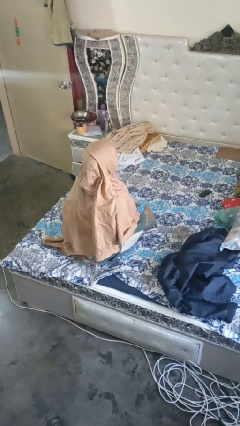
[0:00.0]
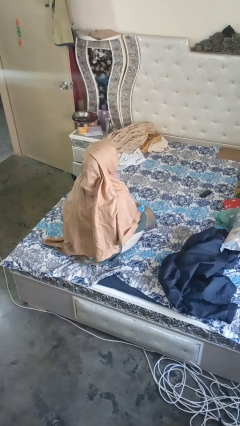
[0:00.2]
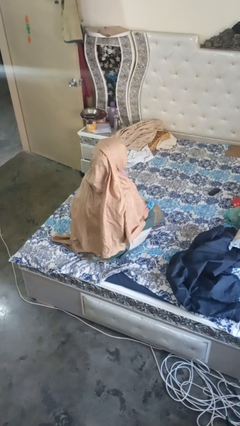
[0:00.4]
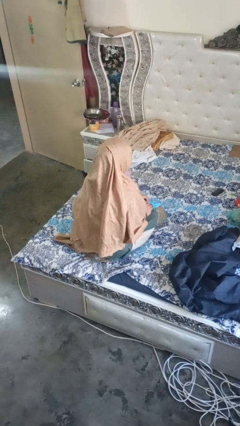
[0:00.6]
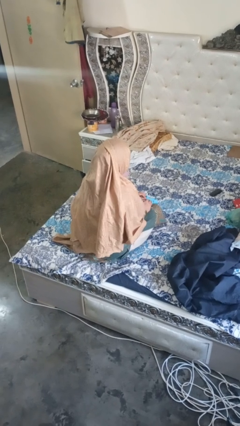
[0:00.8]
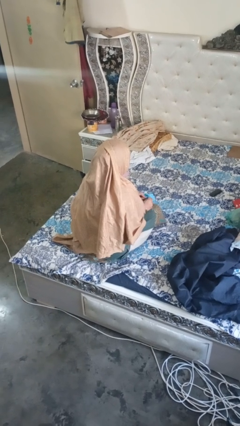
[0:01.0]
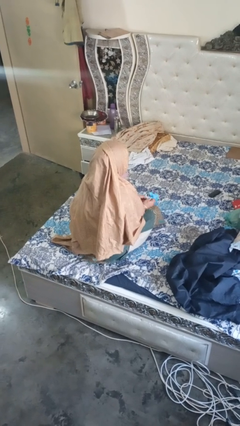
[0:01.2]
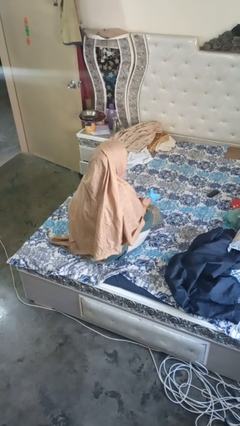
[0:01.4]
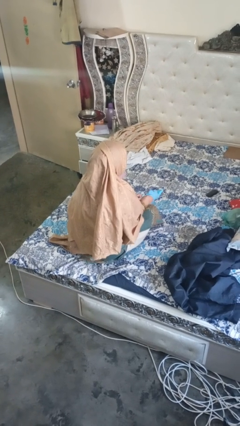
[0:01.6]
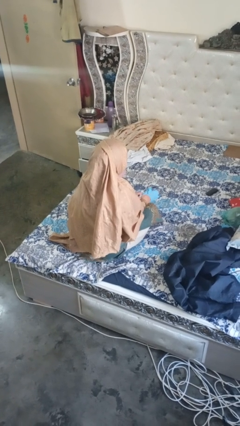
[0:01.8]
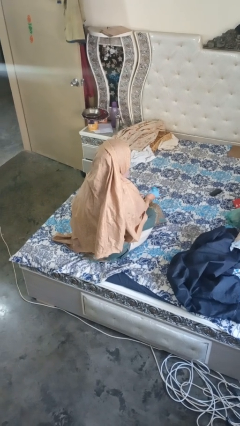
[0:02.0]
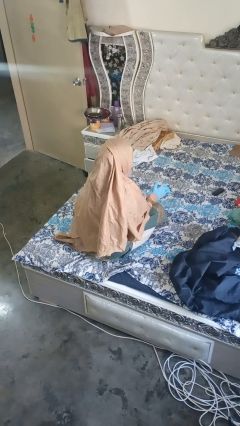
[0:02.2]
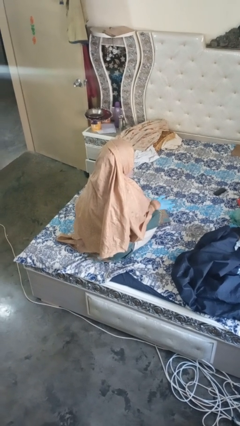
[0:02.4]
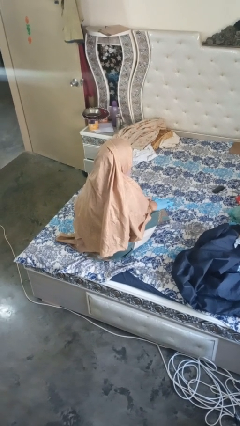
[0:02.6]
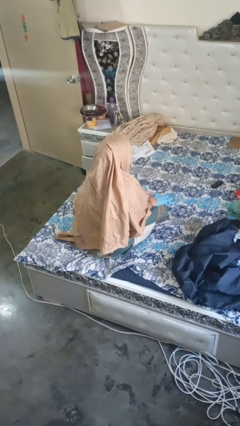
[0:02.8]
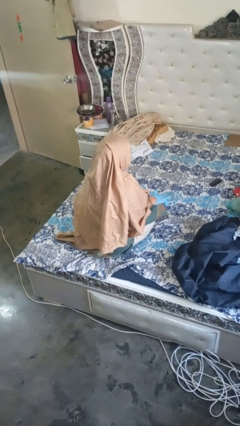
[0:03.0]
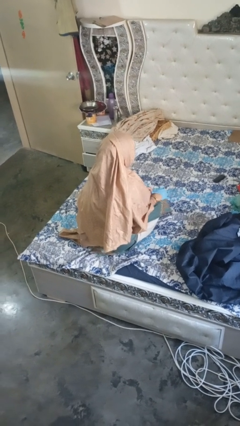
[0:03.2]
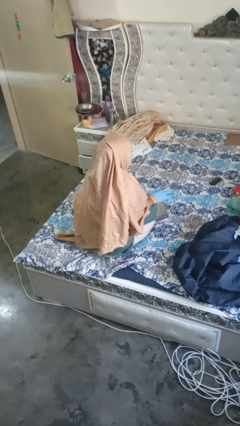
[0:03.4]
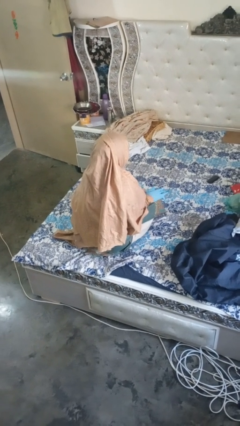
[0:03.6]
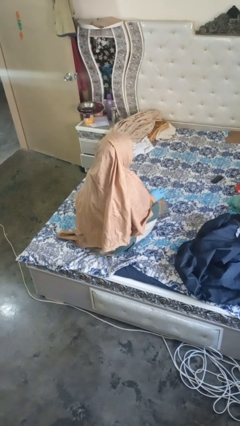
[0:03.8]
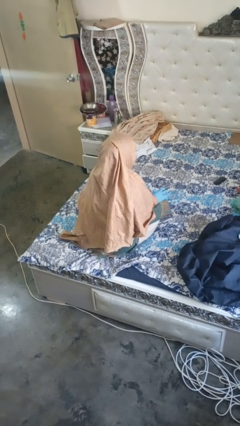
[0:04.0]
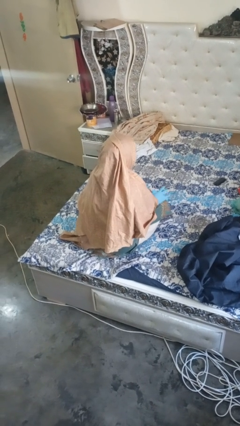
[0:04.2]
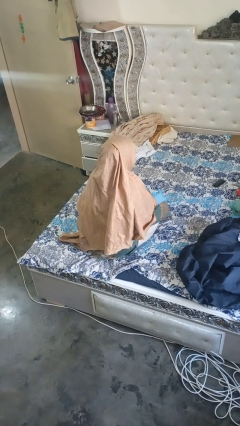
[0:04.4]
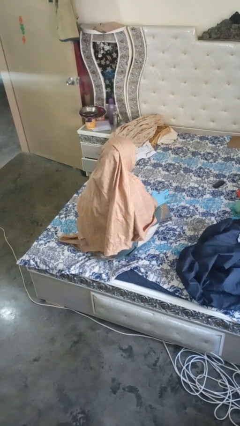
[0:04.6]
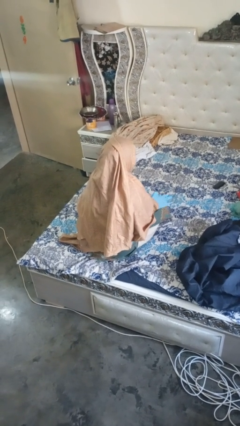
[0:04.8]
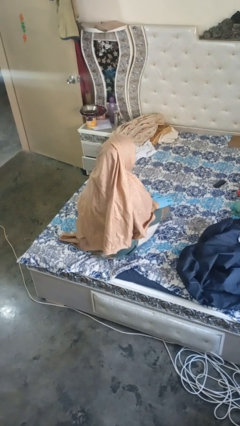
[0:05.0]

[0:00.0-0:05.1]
person puts on gloves

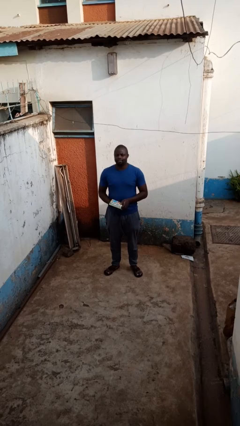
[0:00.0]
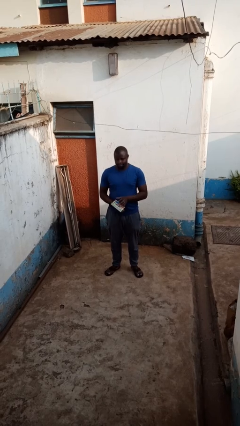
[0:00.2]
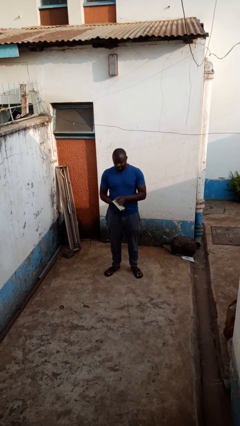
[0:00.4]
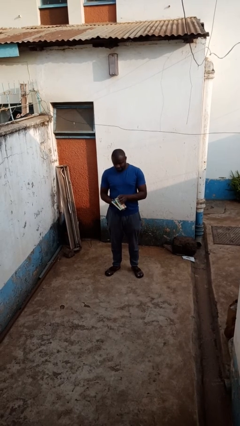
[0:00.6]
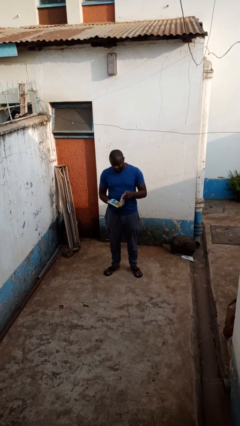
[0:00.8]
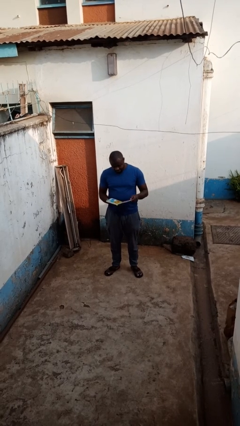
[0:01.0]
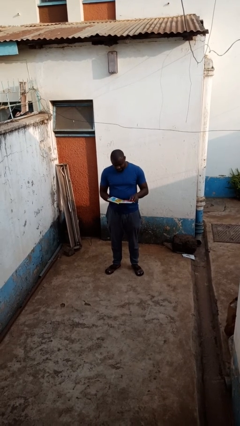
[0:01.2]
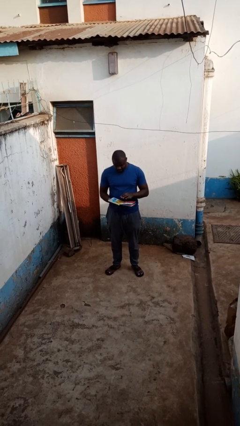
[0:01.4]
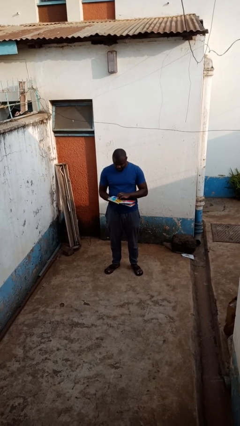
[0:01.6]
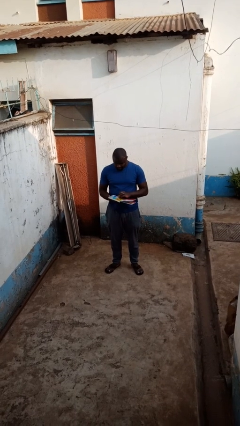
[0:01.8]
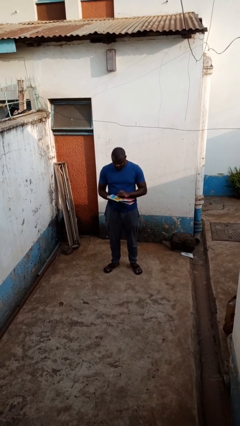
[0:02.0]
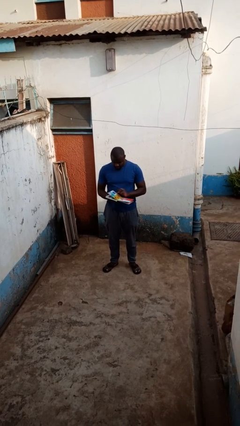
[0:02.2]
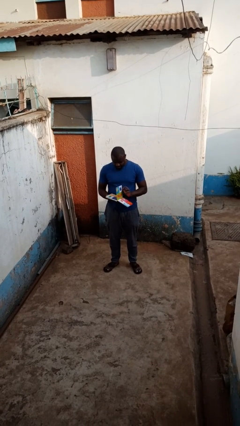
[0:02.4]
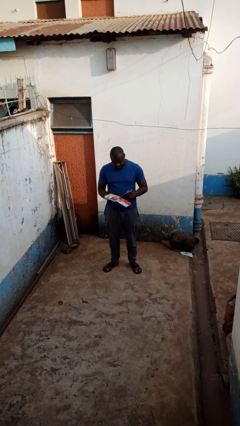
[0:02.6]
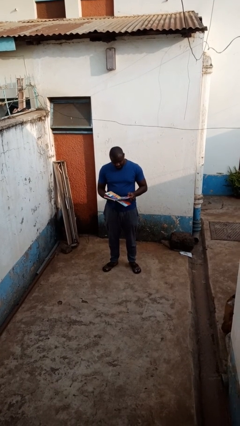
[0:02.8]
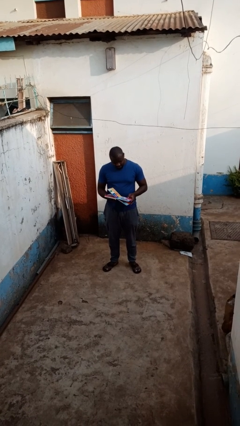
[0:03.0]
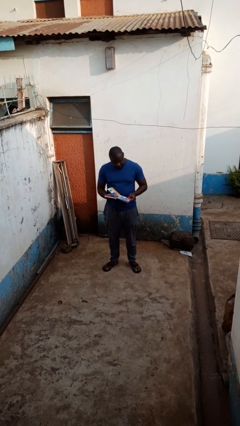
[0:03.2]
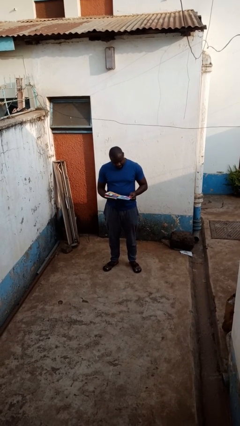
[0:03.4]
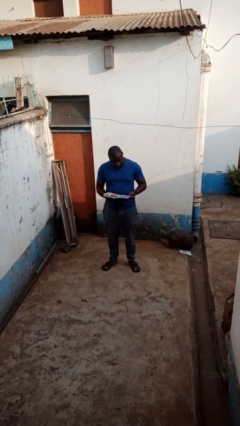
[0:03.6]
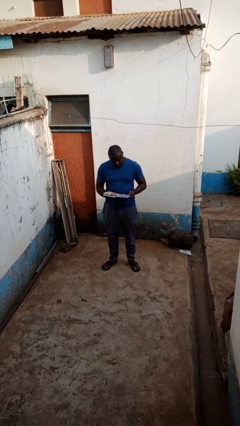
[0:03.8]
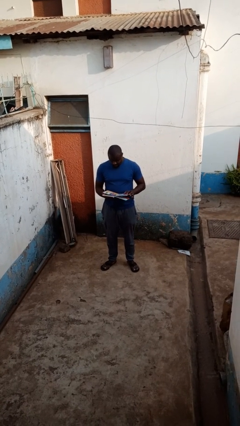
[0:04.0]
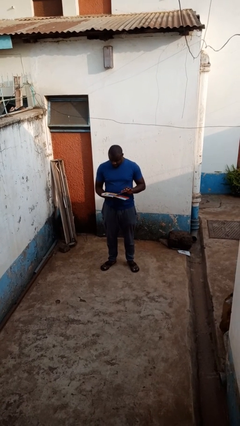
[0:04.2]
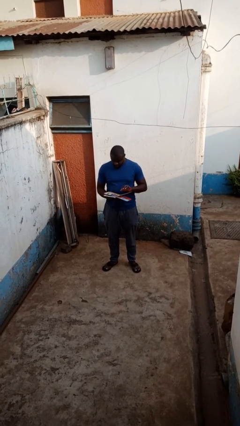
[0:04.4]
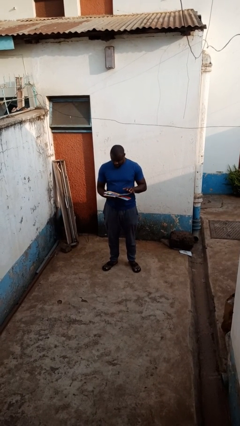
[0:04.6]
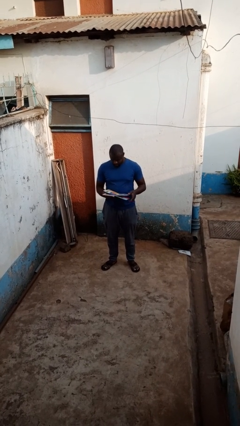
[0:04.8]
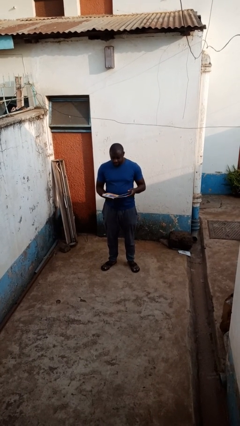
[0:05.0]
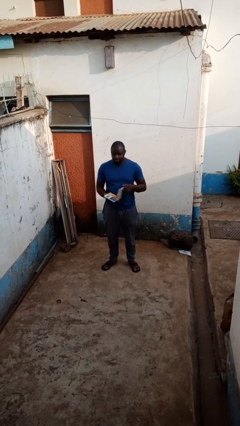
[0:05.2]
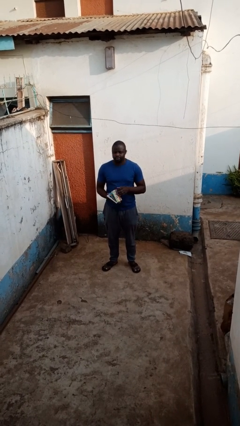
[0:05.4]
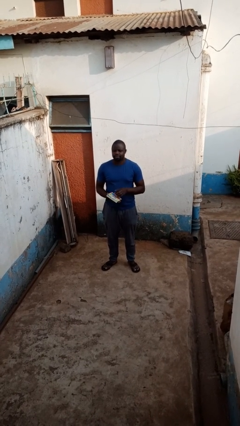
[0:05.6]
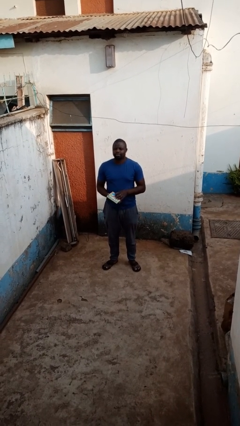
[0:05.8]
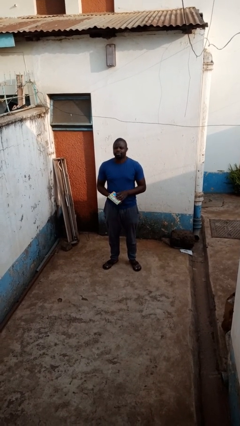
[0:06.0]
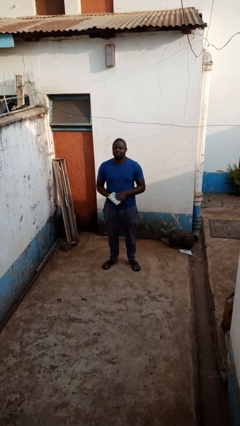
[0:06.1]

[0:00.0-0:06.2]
person reads book

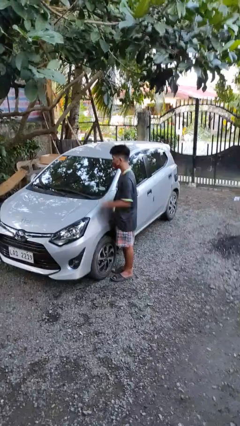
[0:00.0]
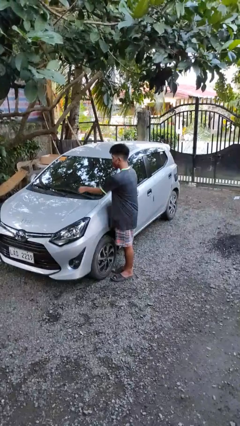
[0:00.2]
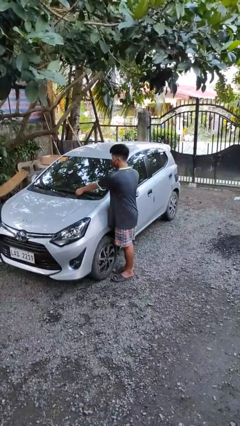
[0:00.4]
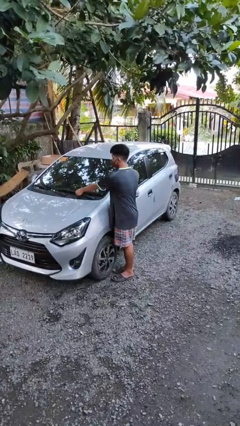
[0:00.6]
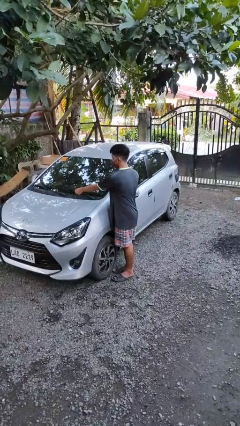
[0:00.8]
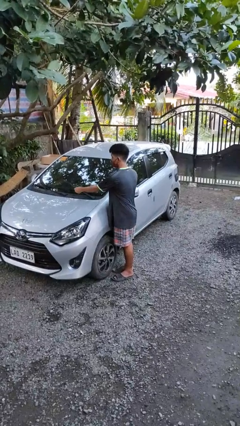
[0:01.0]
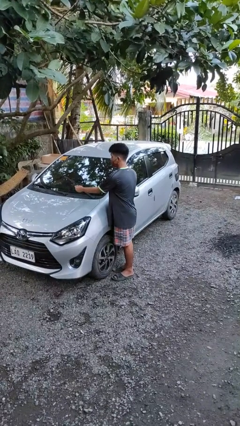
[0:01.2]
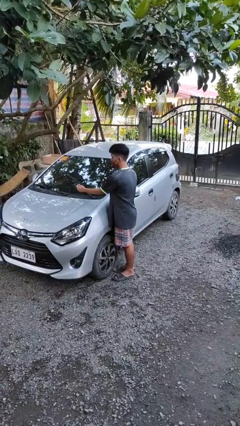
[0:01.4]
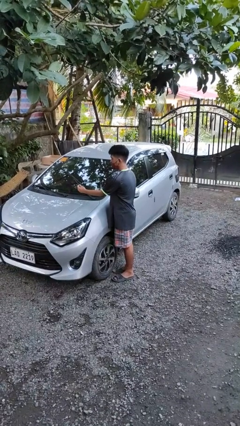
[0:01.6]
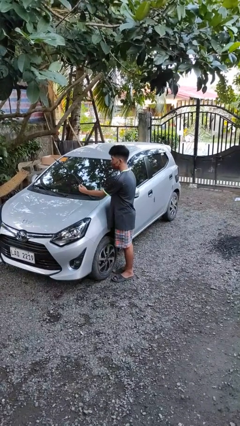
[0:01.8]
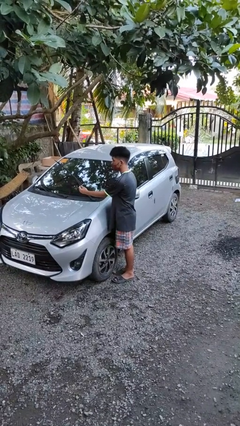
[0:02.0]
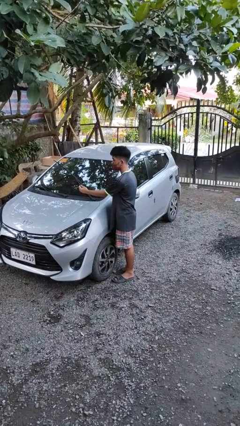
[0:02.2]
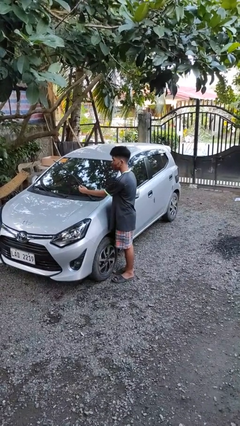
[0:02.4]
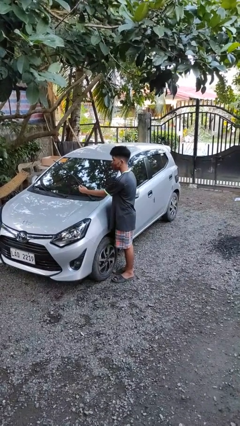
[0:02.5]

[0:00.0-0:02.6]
person flips up car wipers

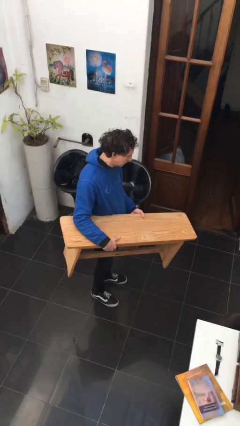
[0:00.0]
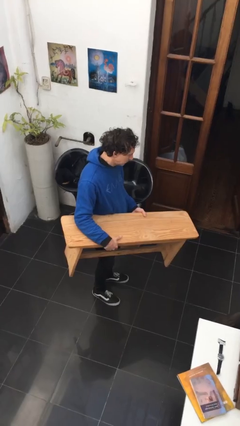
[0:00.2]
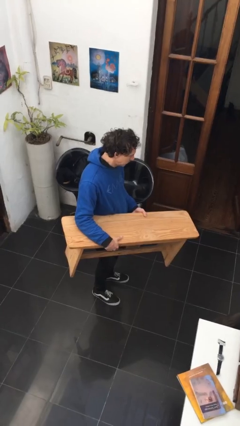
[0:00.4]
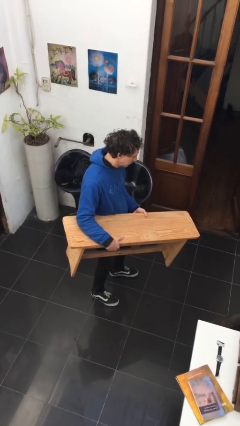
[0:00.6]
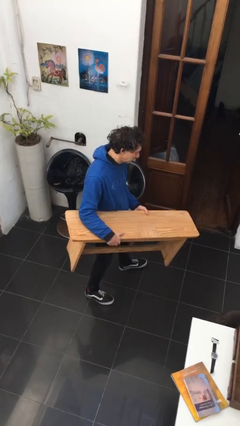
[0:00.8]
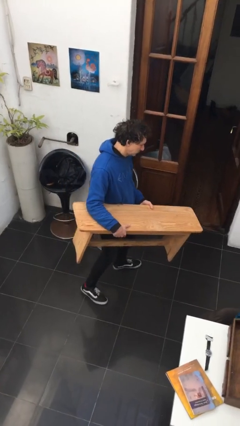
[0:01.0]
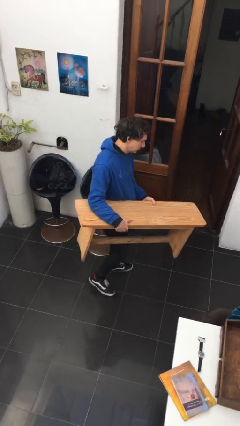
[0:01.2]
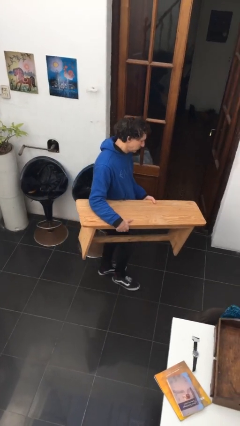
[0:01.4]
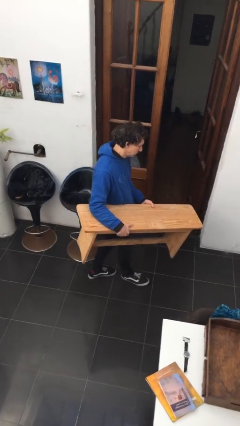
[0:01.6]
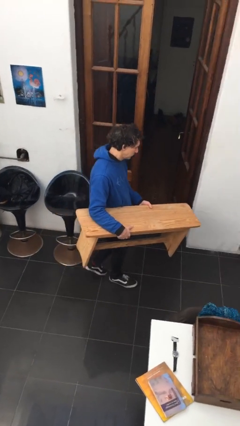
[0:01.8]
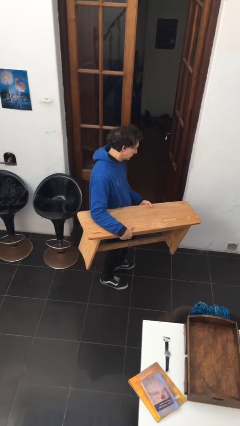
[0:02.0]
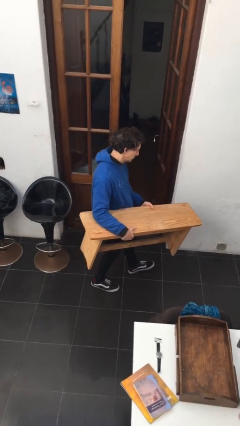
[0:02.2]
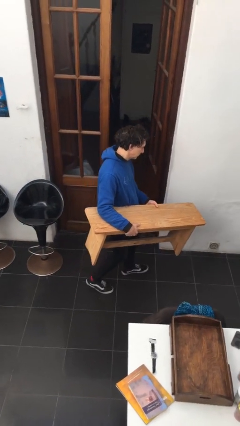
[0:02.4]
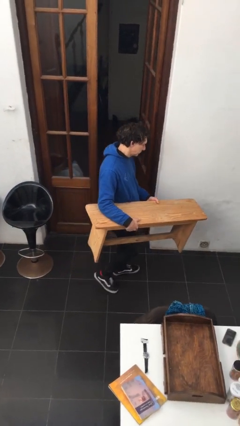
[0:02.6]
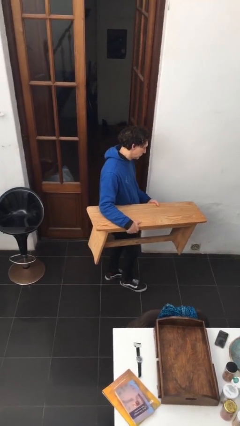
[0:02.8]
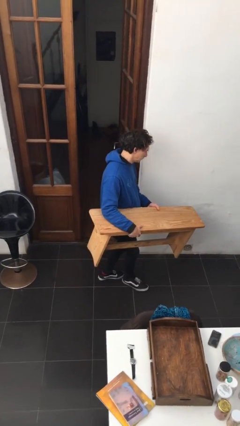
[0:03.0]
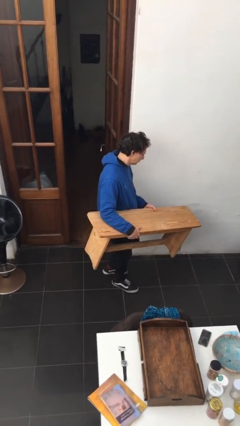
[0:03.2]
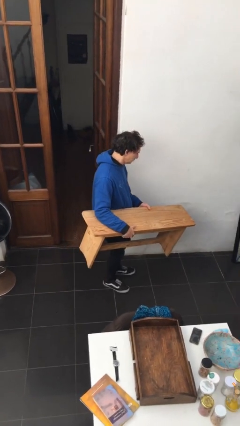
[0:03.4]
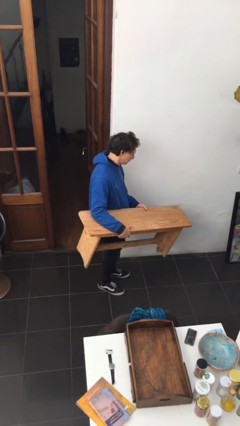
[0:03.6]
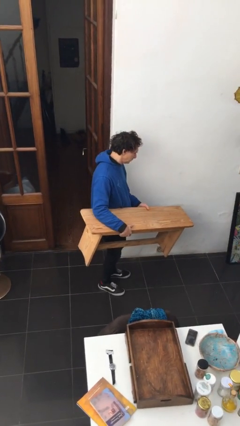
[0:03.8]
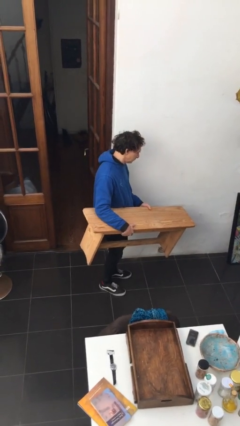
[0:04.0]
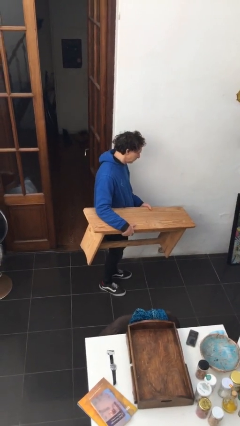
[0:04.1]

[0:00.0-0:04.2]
person carries furniture
